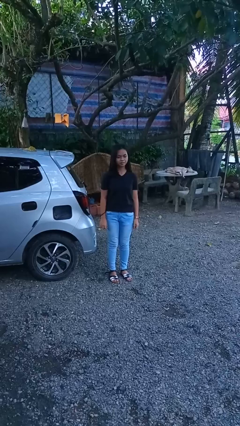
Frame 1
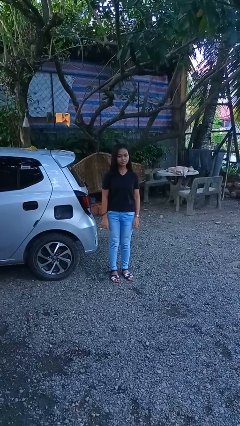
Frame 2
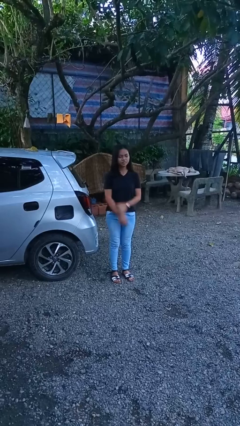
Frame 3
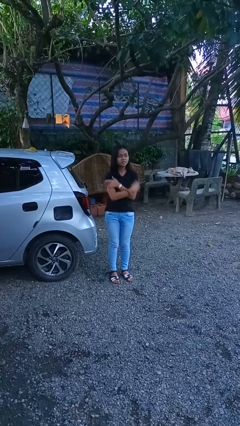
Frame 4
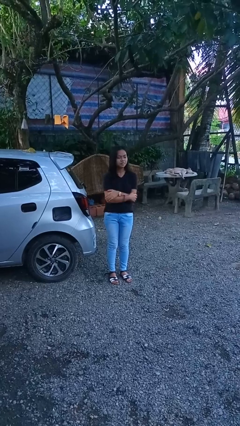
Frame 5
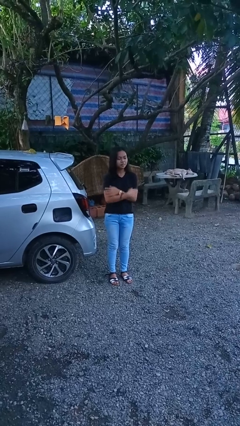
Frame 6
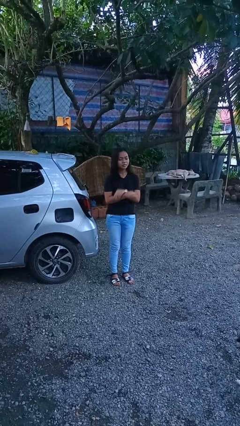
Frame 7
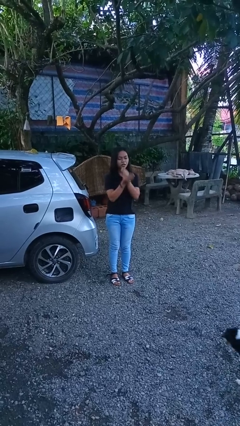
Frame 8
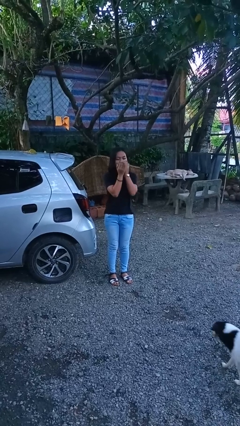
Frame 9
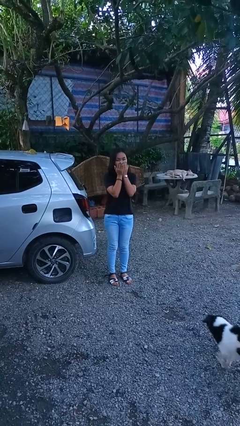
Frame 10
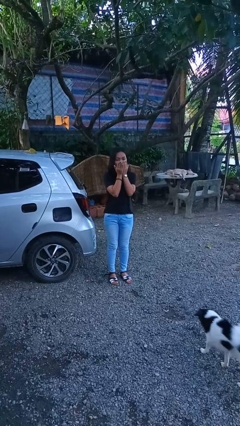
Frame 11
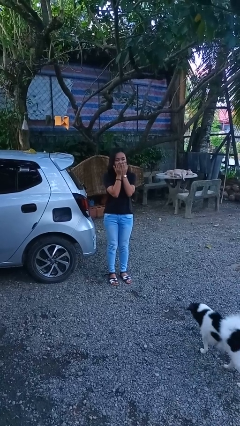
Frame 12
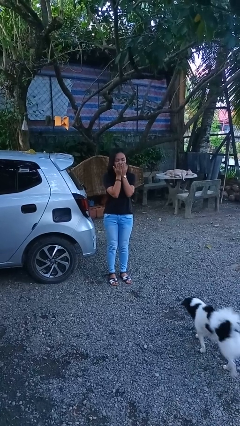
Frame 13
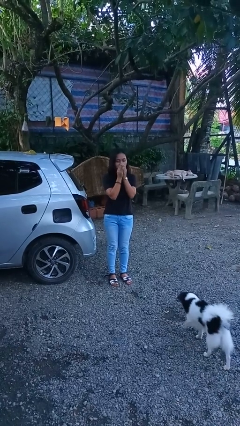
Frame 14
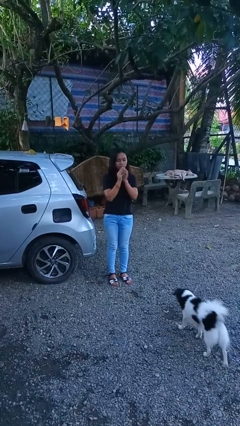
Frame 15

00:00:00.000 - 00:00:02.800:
person blows into hands

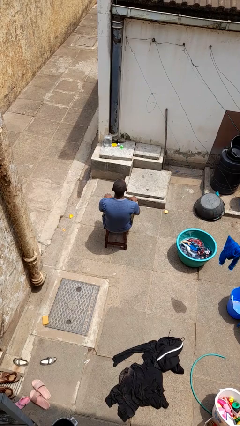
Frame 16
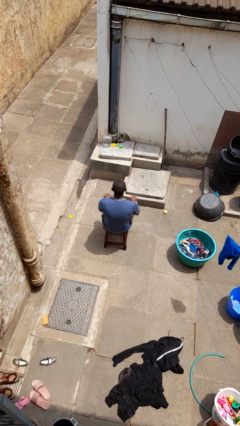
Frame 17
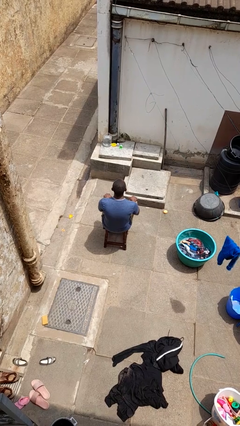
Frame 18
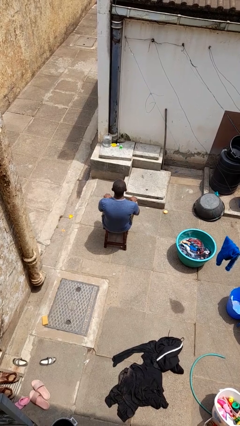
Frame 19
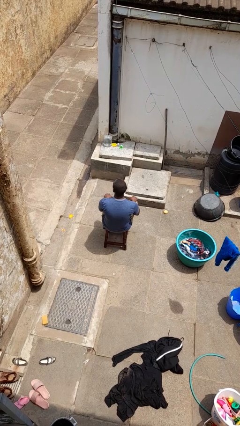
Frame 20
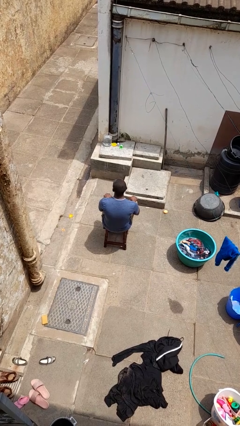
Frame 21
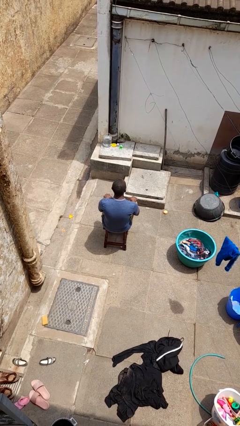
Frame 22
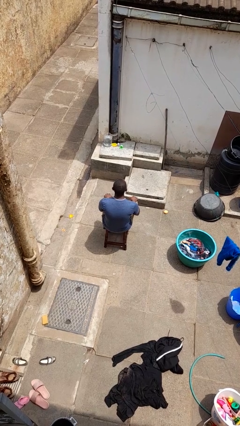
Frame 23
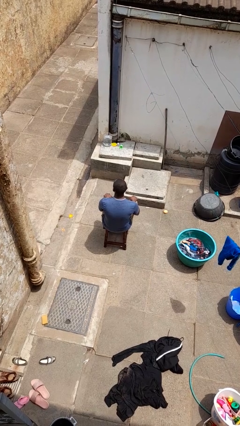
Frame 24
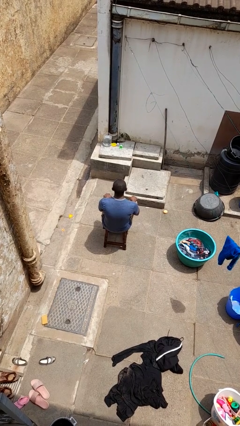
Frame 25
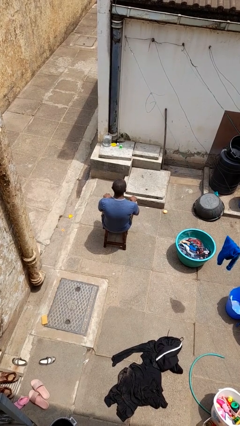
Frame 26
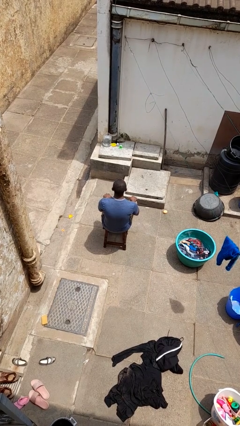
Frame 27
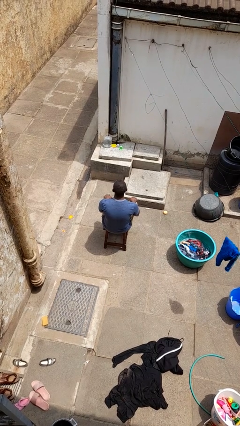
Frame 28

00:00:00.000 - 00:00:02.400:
person shakes head

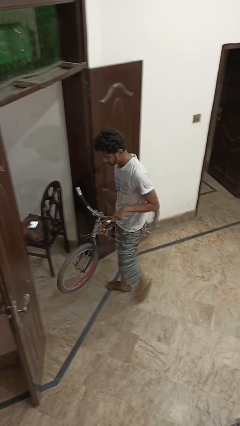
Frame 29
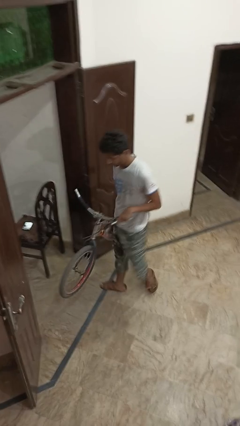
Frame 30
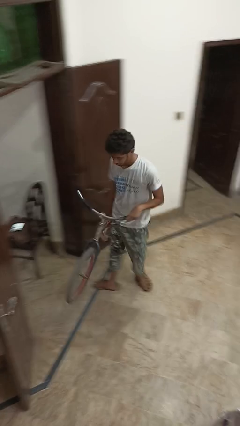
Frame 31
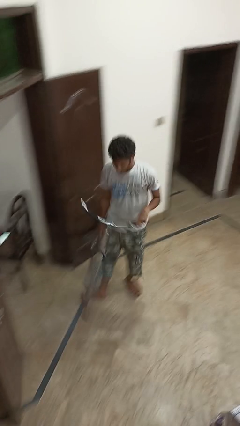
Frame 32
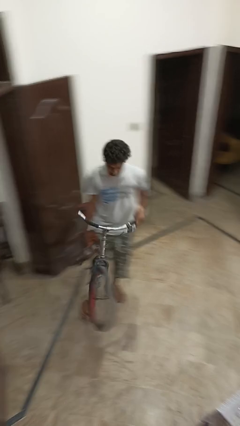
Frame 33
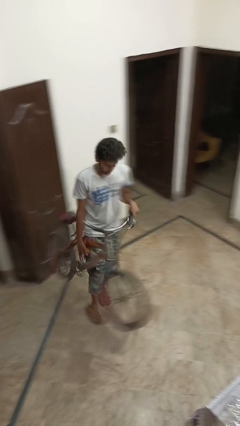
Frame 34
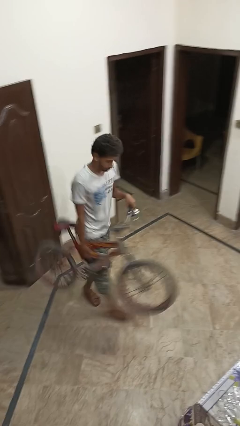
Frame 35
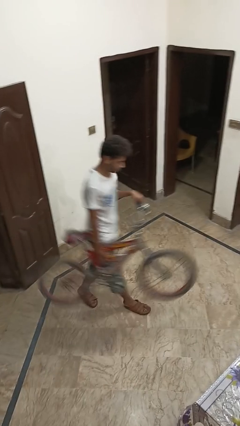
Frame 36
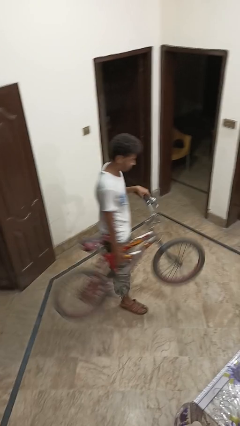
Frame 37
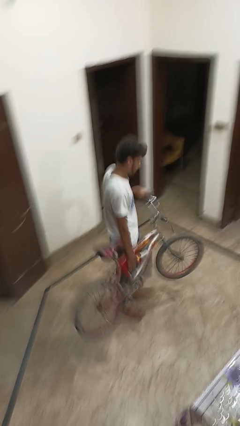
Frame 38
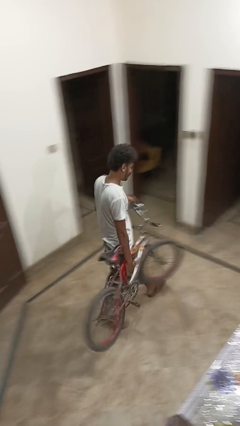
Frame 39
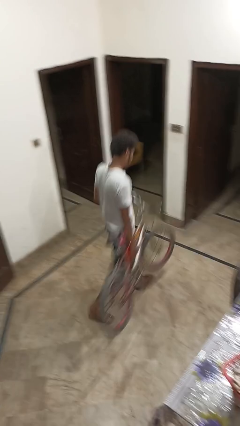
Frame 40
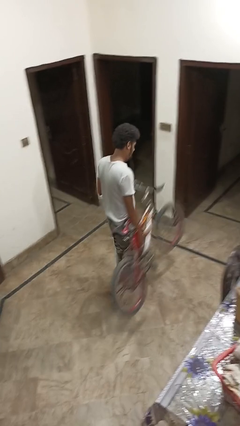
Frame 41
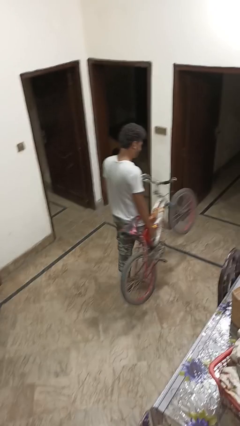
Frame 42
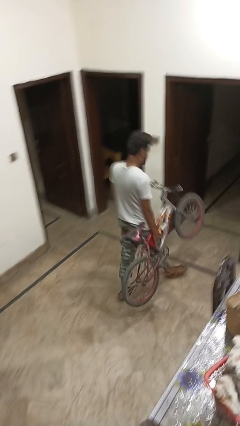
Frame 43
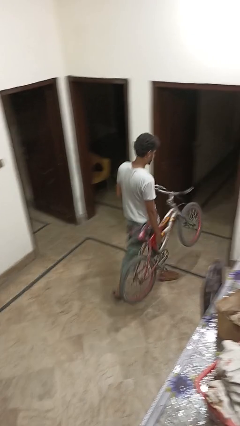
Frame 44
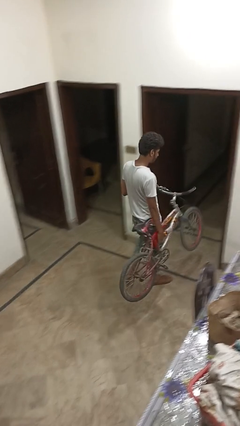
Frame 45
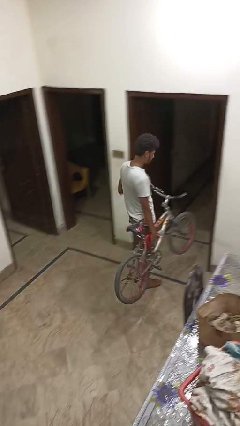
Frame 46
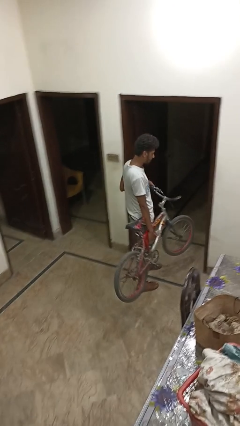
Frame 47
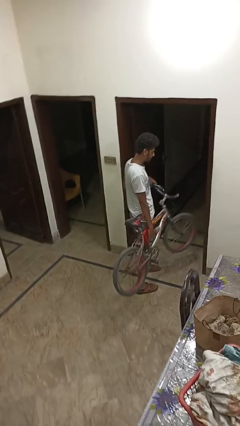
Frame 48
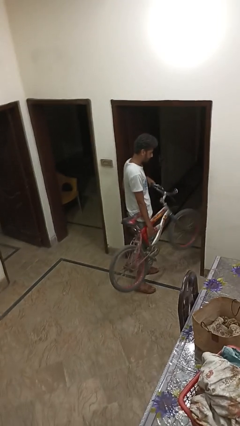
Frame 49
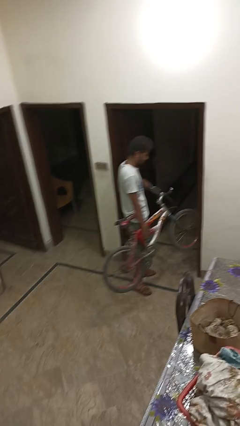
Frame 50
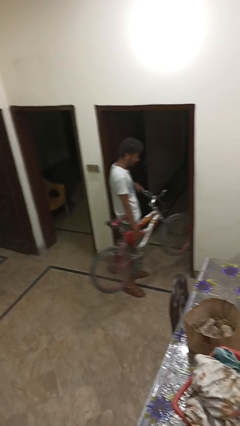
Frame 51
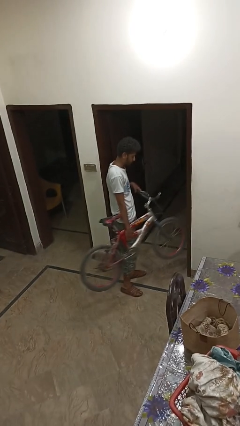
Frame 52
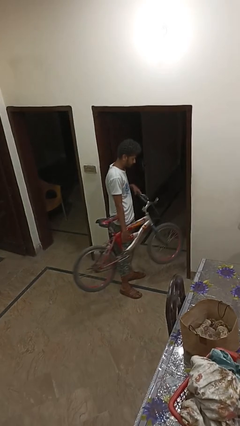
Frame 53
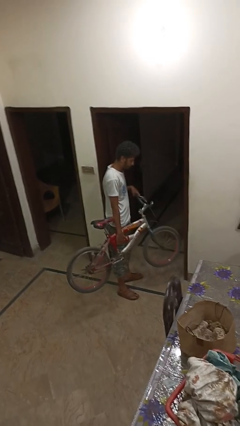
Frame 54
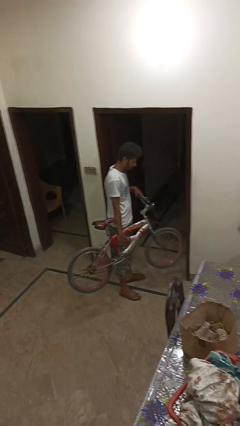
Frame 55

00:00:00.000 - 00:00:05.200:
person carries bicycle

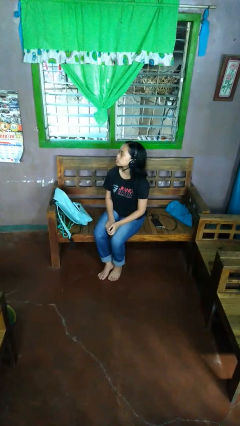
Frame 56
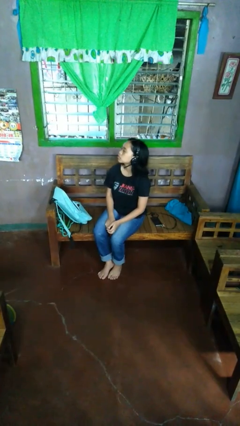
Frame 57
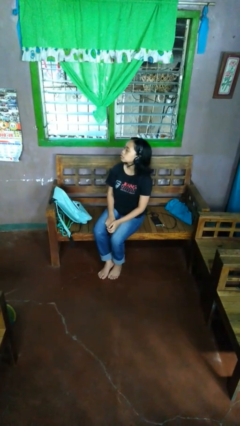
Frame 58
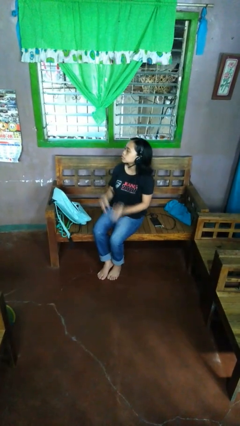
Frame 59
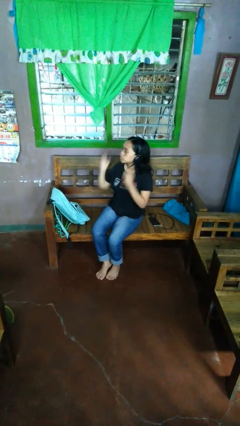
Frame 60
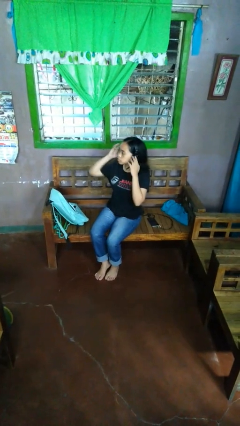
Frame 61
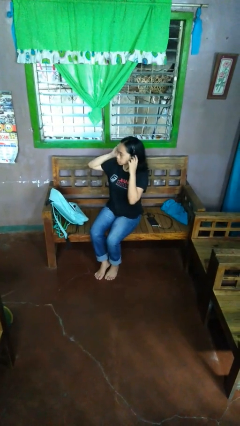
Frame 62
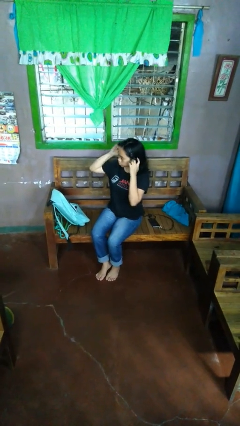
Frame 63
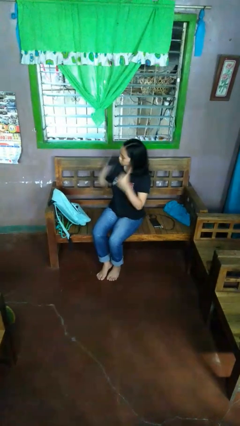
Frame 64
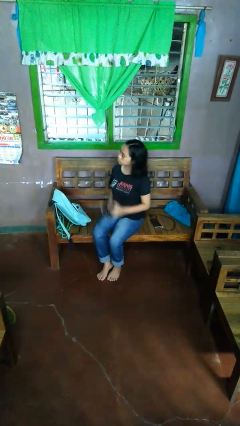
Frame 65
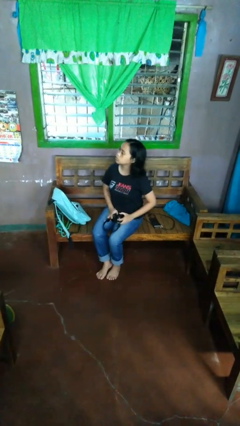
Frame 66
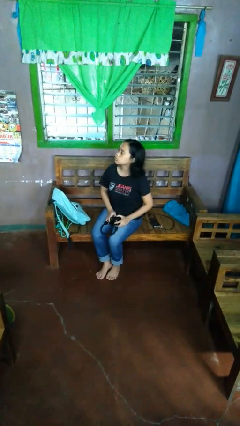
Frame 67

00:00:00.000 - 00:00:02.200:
person takes off headphones

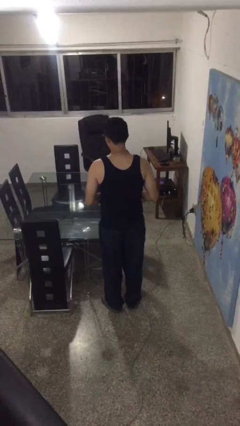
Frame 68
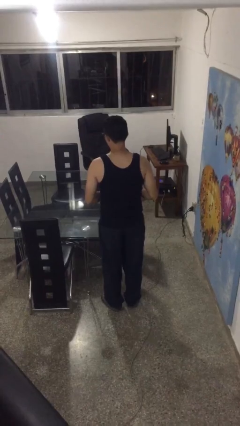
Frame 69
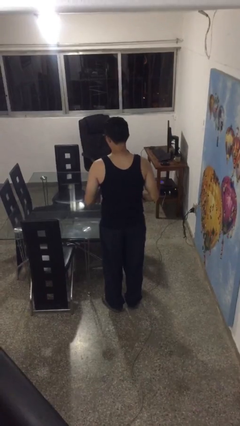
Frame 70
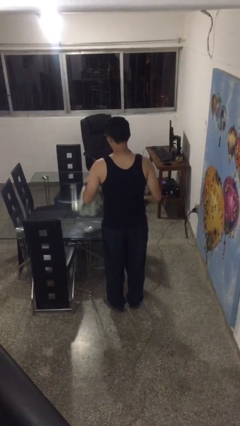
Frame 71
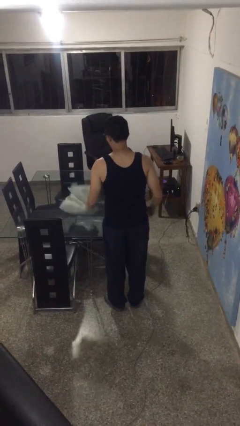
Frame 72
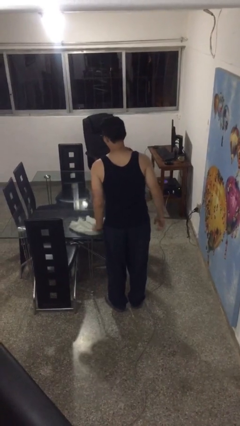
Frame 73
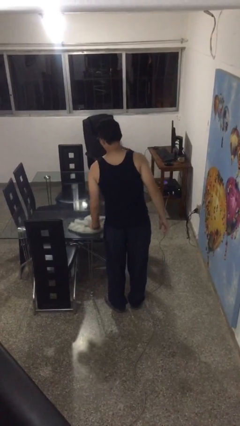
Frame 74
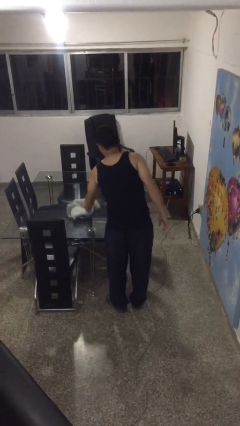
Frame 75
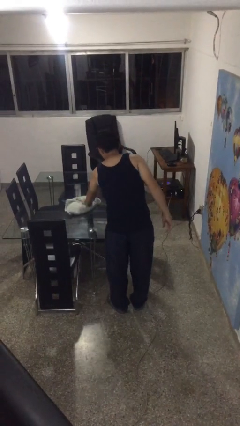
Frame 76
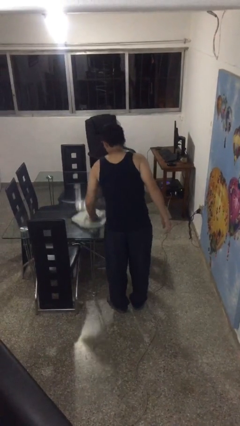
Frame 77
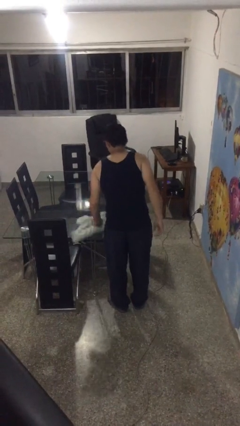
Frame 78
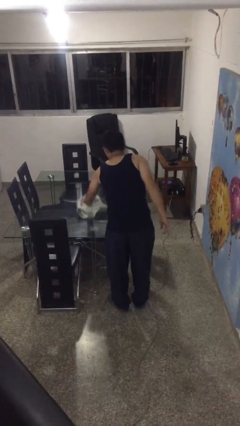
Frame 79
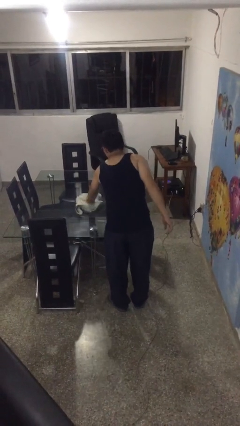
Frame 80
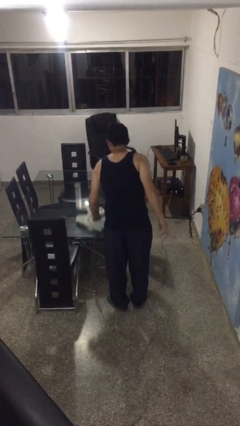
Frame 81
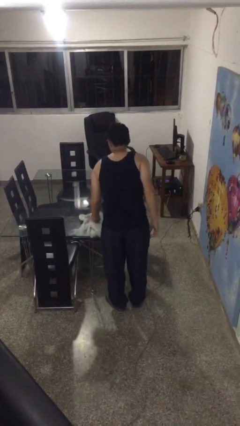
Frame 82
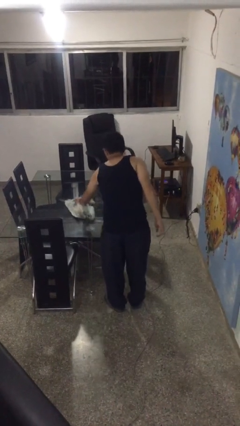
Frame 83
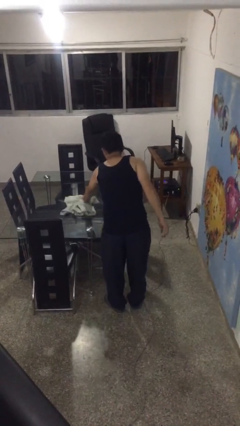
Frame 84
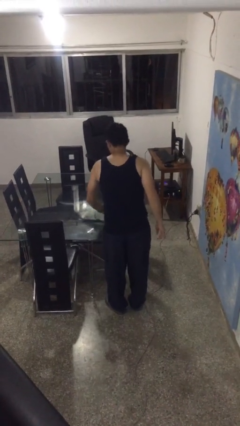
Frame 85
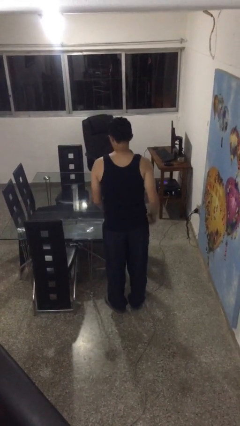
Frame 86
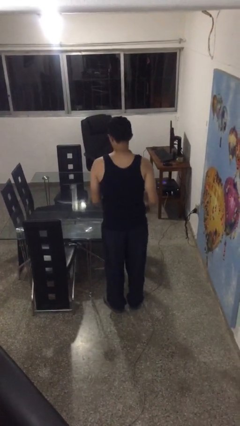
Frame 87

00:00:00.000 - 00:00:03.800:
person cleans table with rag

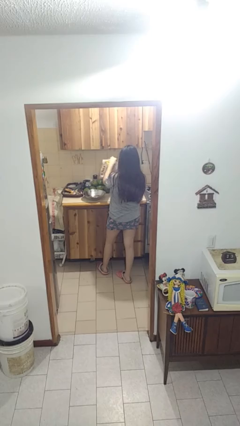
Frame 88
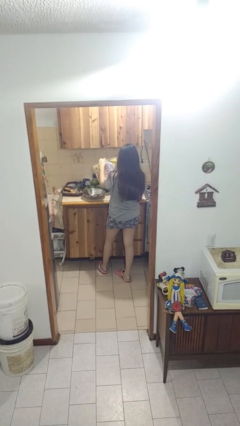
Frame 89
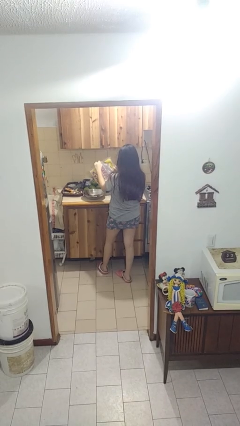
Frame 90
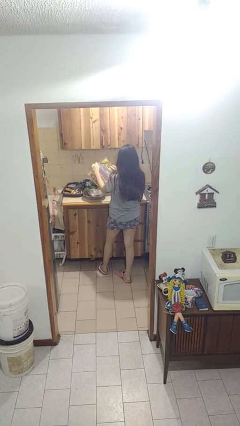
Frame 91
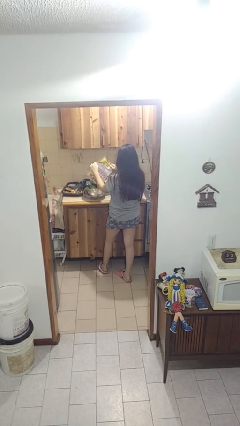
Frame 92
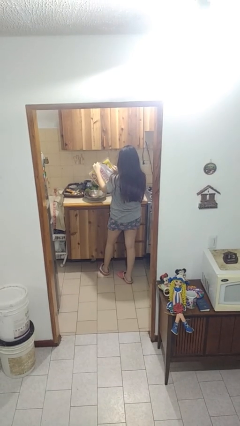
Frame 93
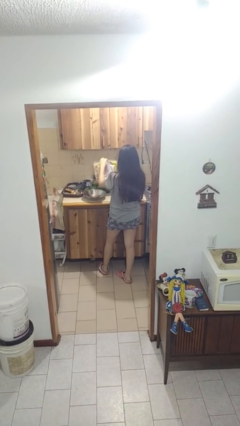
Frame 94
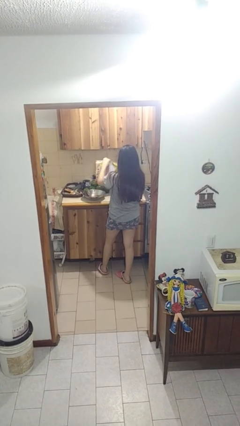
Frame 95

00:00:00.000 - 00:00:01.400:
person pours into bowl
